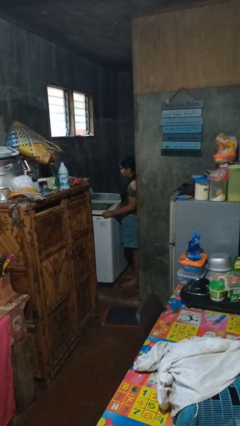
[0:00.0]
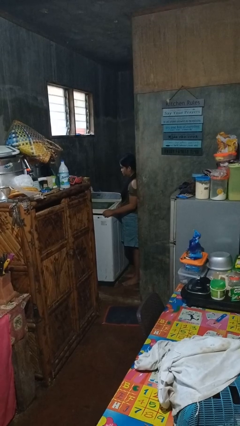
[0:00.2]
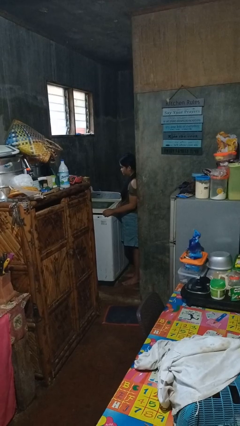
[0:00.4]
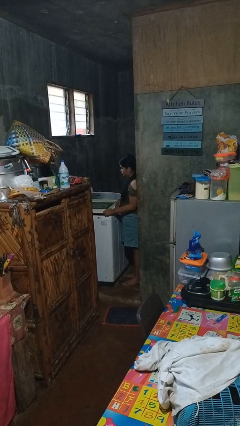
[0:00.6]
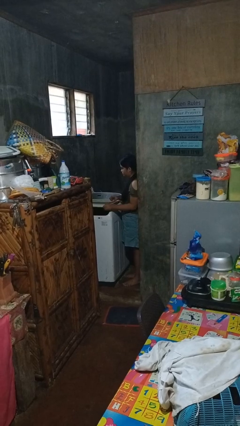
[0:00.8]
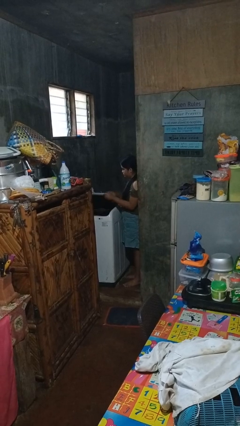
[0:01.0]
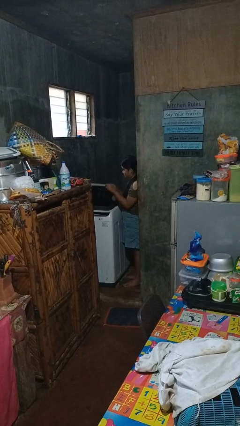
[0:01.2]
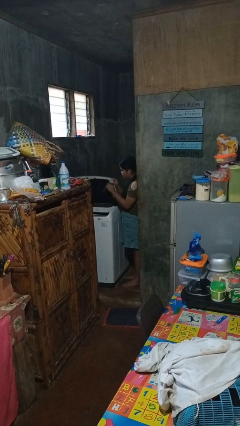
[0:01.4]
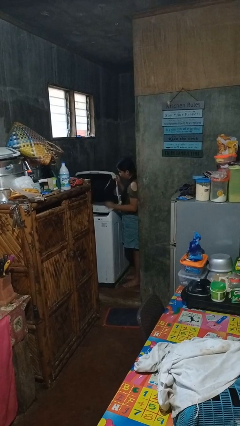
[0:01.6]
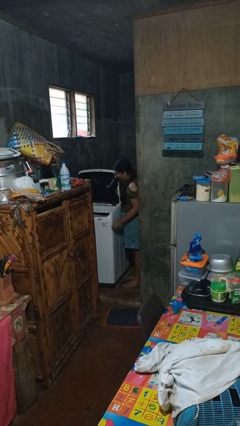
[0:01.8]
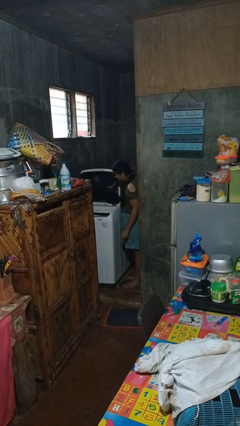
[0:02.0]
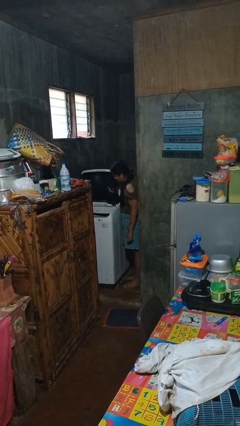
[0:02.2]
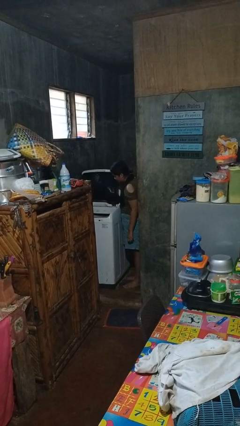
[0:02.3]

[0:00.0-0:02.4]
person opens clothes washer

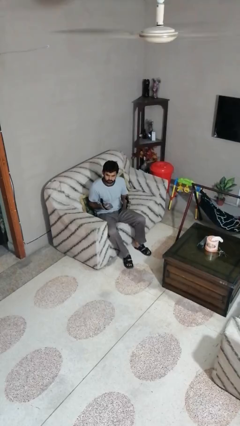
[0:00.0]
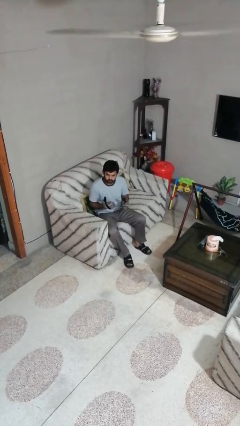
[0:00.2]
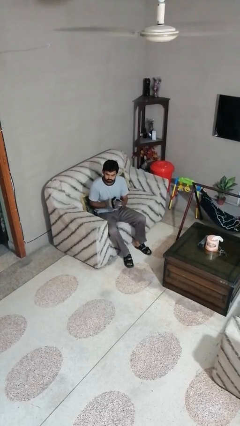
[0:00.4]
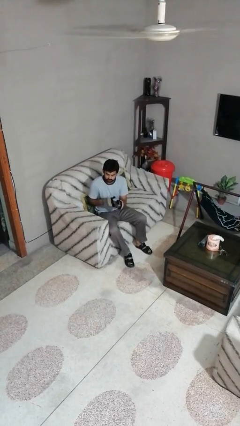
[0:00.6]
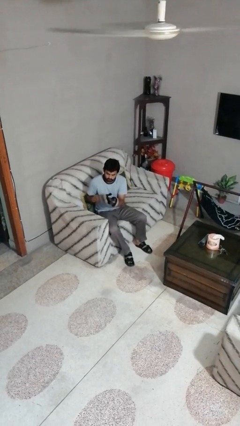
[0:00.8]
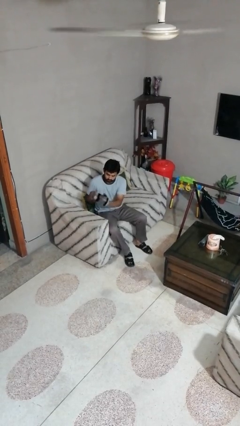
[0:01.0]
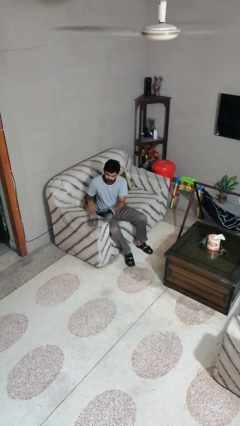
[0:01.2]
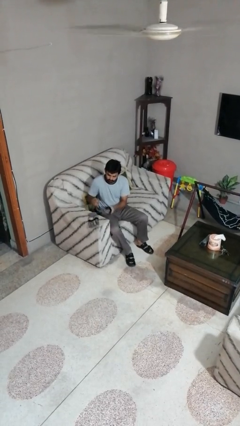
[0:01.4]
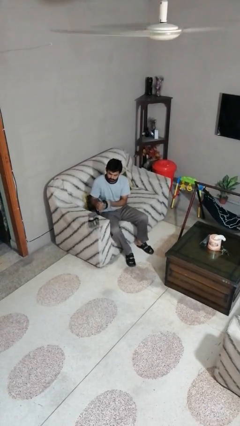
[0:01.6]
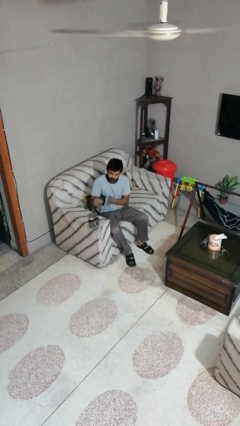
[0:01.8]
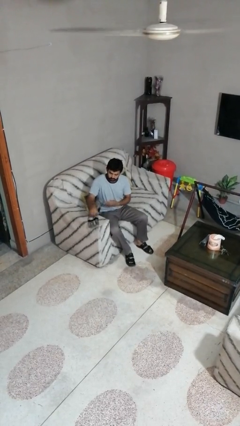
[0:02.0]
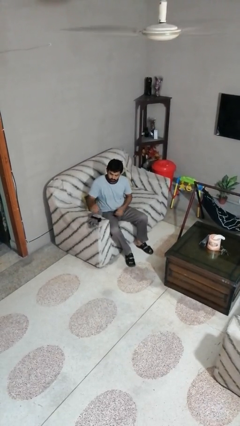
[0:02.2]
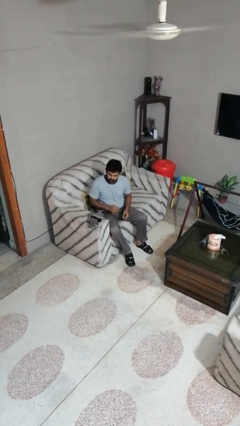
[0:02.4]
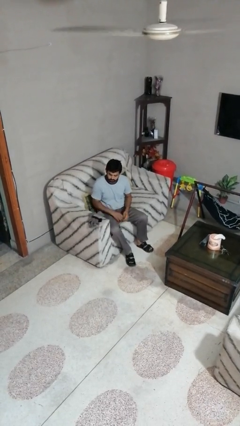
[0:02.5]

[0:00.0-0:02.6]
person takes off gloves

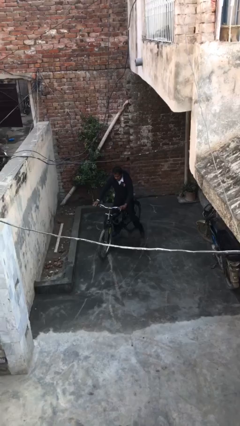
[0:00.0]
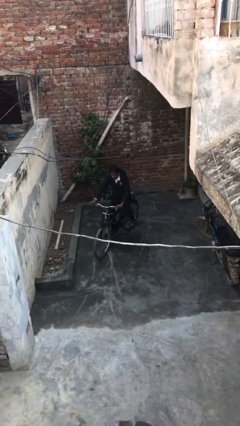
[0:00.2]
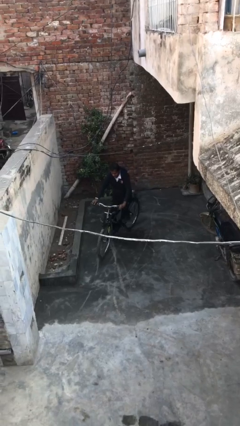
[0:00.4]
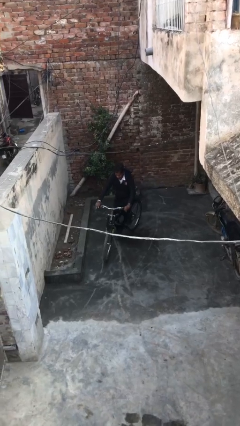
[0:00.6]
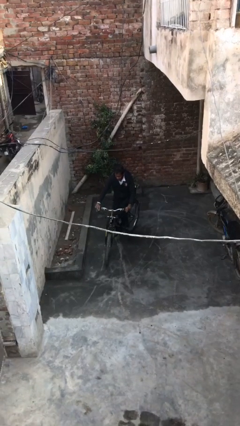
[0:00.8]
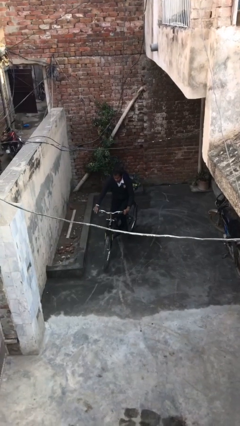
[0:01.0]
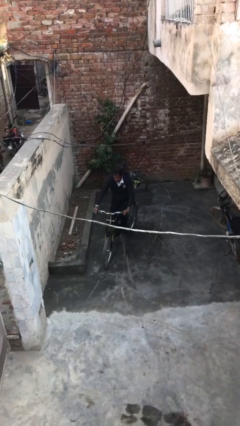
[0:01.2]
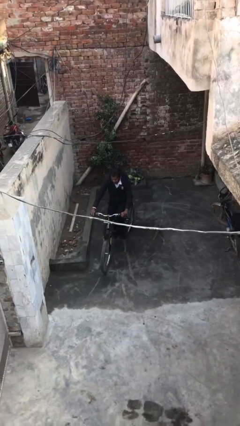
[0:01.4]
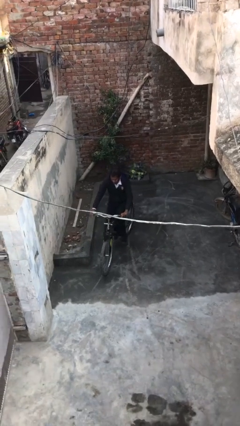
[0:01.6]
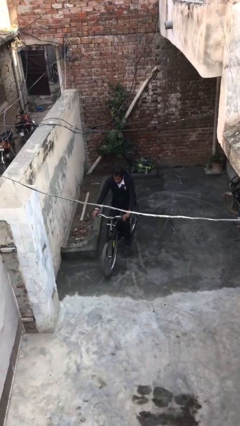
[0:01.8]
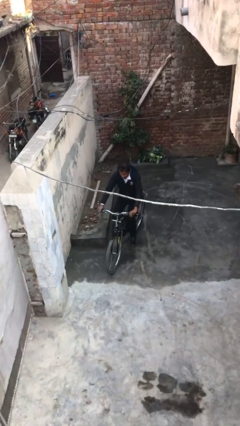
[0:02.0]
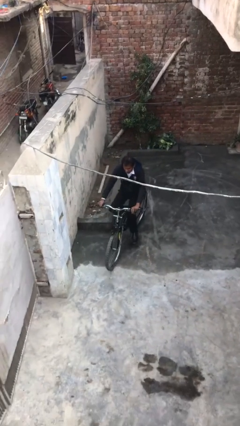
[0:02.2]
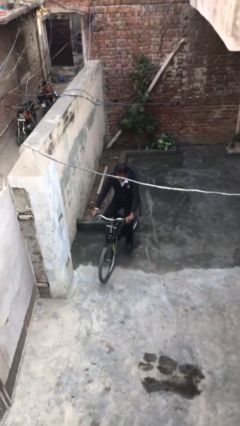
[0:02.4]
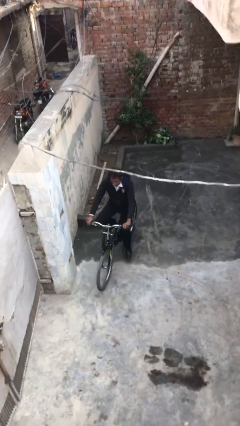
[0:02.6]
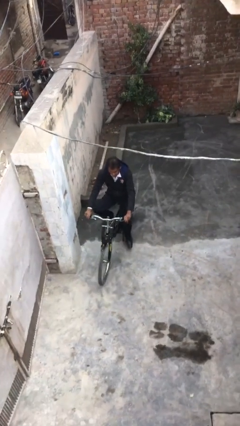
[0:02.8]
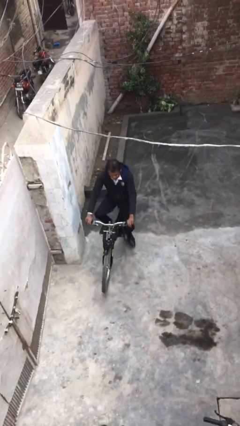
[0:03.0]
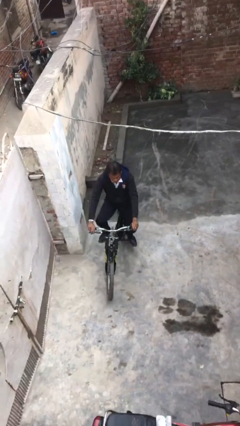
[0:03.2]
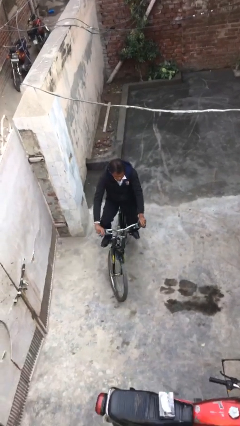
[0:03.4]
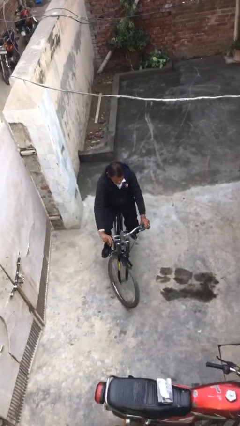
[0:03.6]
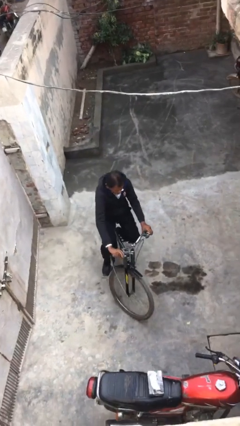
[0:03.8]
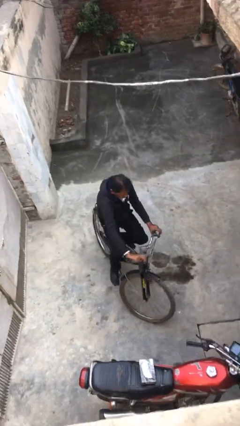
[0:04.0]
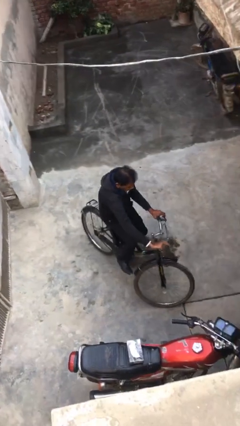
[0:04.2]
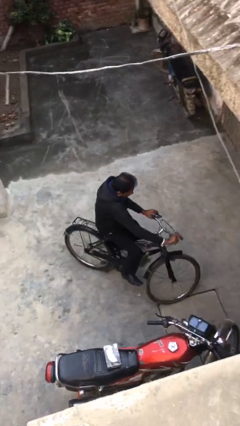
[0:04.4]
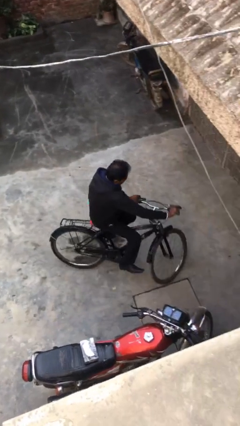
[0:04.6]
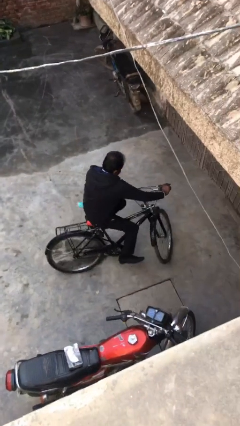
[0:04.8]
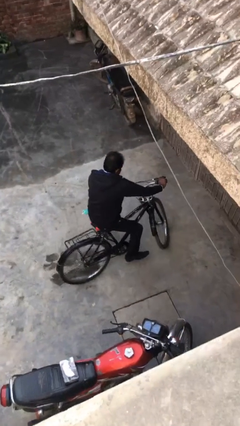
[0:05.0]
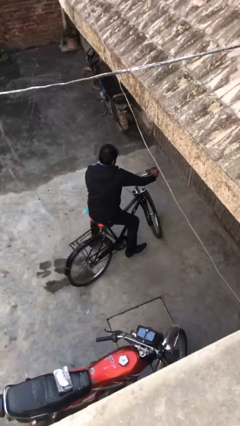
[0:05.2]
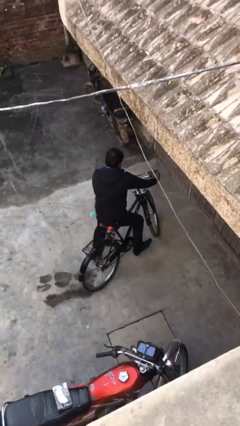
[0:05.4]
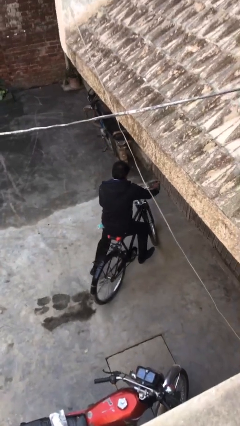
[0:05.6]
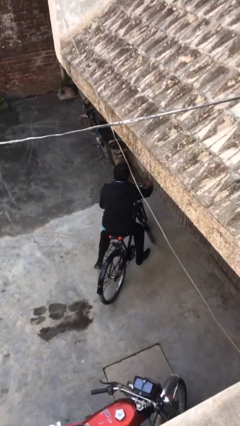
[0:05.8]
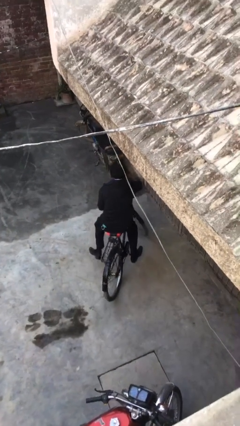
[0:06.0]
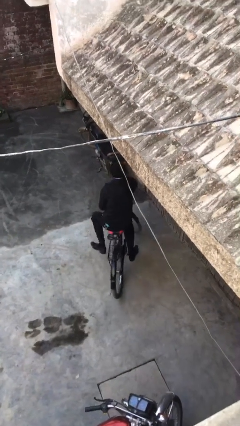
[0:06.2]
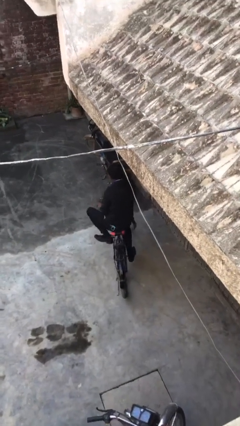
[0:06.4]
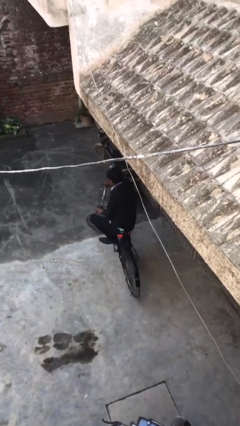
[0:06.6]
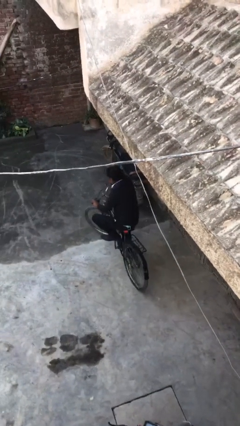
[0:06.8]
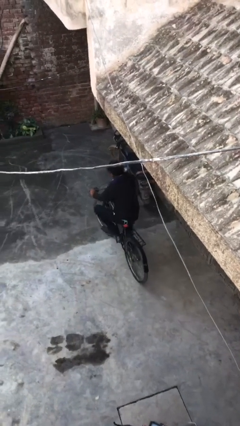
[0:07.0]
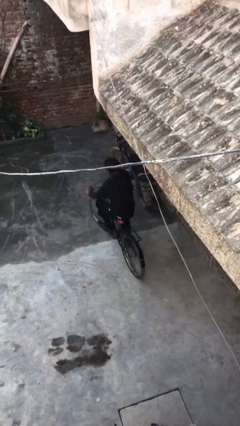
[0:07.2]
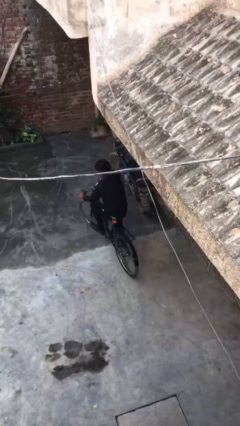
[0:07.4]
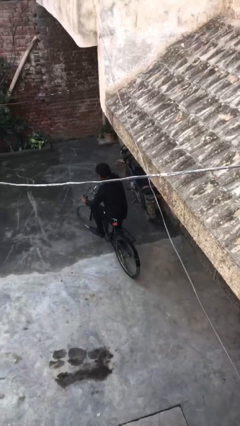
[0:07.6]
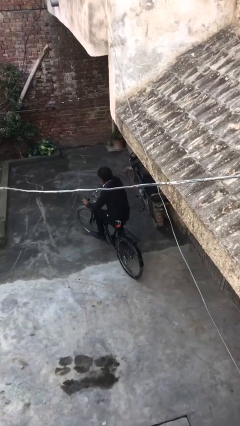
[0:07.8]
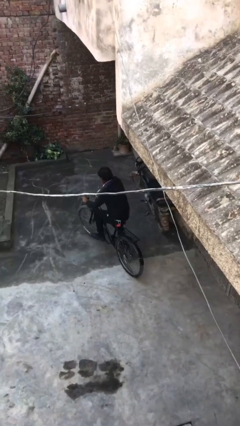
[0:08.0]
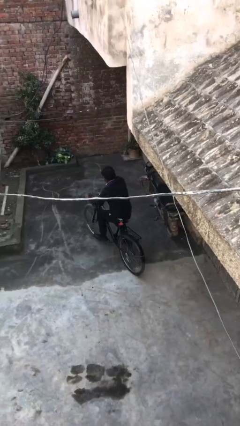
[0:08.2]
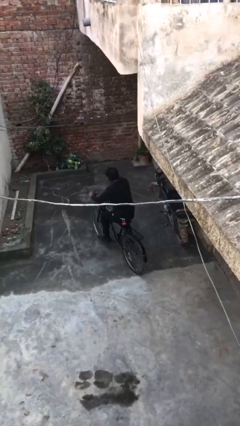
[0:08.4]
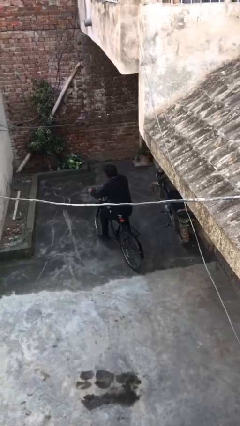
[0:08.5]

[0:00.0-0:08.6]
person rides bicycle

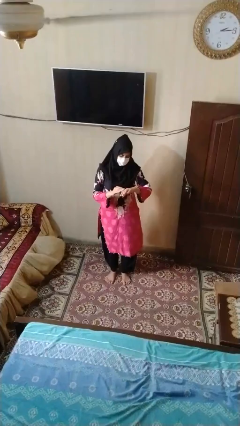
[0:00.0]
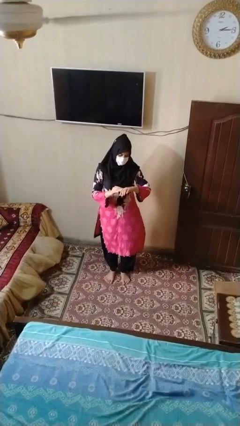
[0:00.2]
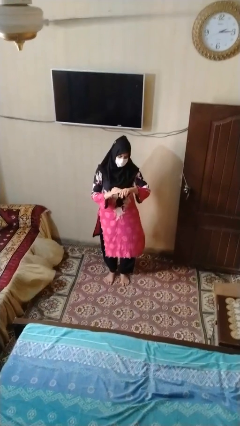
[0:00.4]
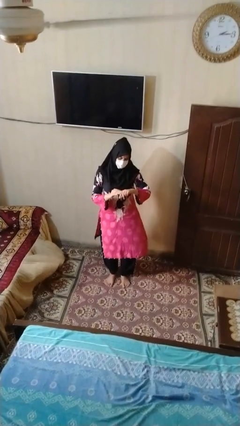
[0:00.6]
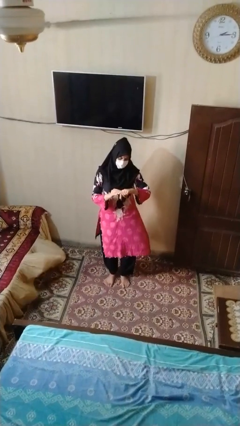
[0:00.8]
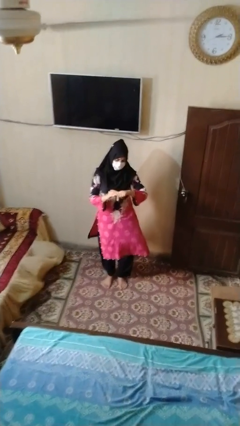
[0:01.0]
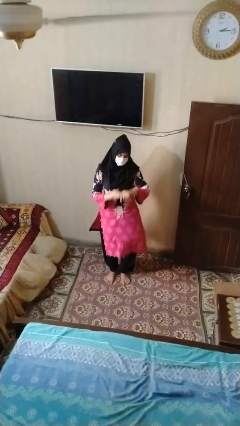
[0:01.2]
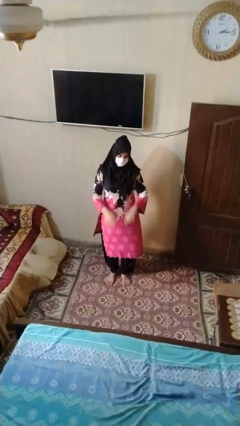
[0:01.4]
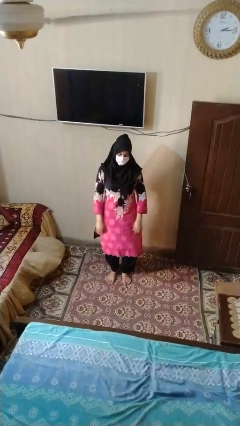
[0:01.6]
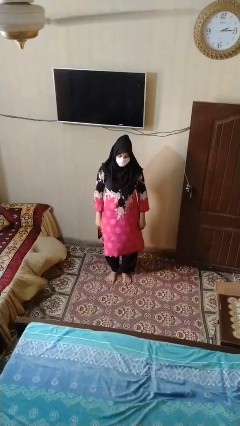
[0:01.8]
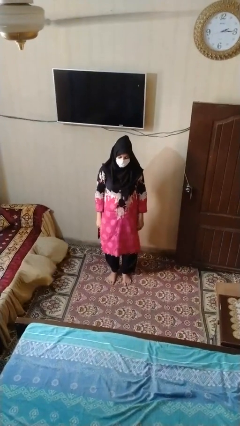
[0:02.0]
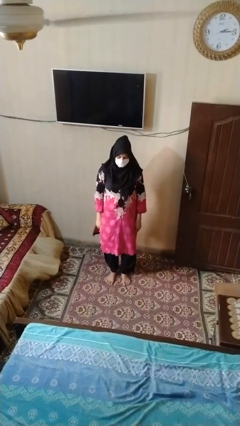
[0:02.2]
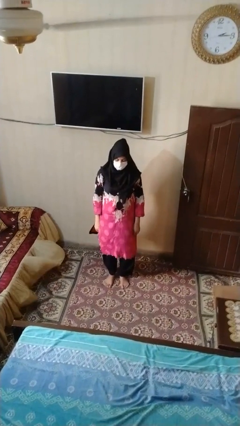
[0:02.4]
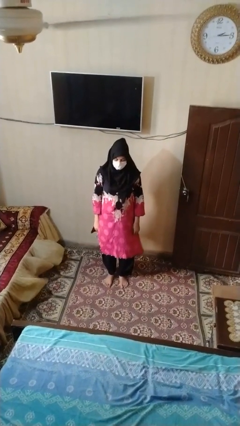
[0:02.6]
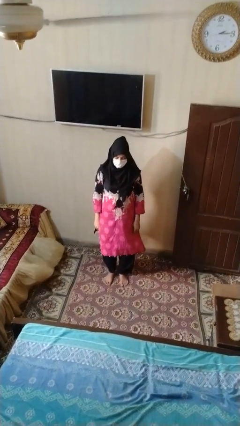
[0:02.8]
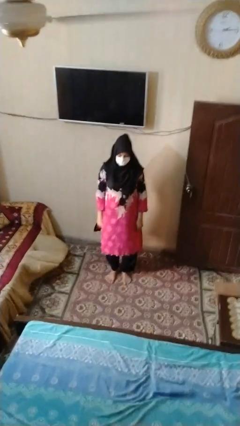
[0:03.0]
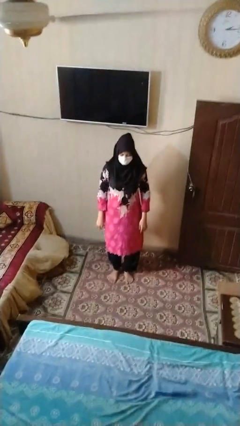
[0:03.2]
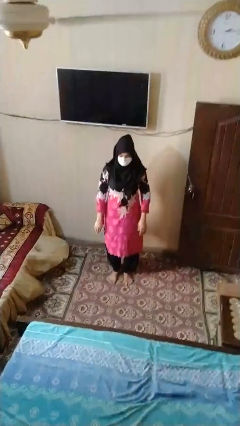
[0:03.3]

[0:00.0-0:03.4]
person opens jewelry box

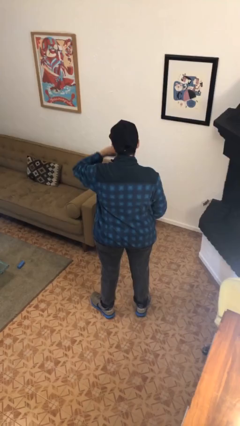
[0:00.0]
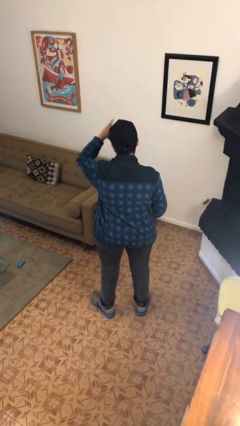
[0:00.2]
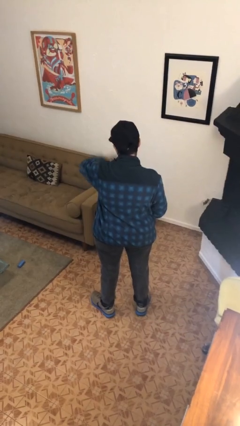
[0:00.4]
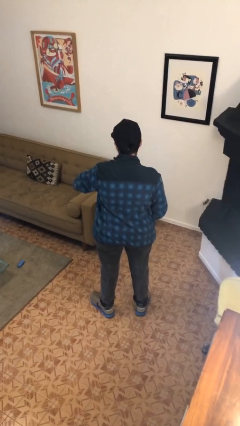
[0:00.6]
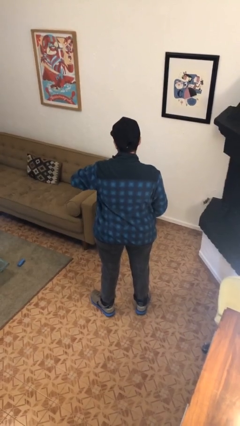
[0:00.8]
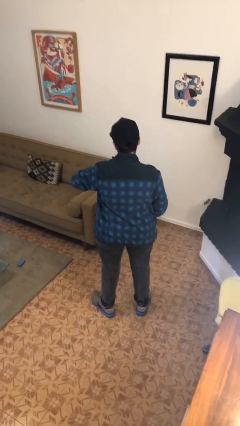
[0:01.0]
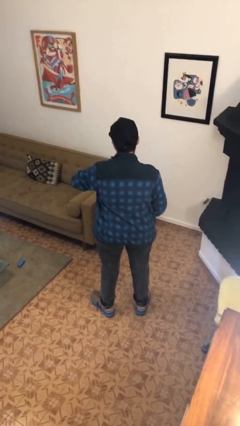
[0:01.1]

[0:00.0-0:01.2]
person gestures swipe down
